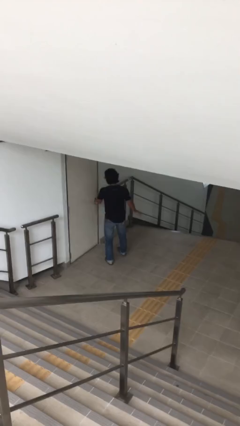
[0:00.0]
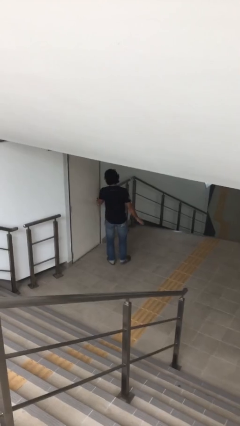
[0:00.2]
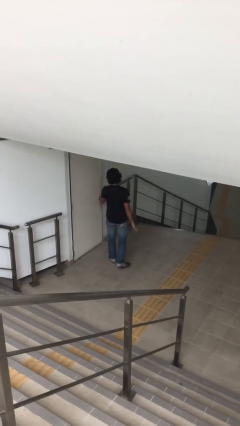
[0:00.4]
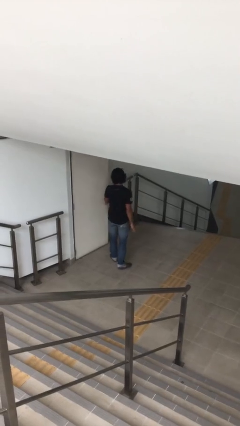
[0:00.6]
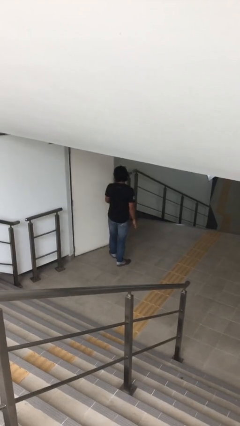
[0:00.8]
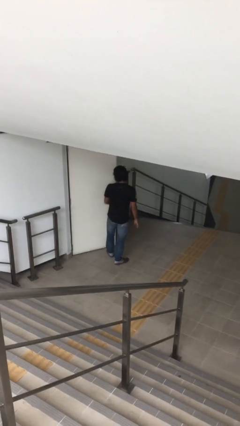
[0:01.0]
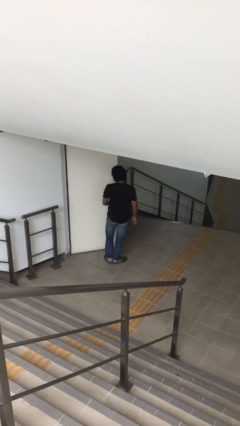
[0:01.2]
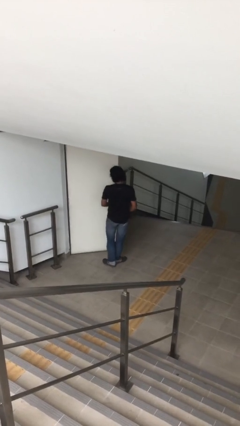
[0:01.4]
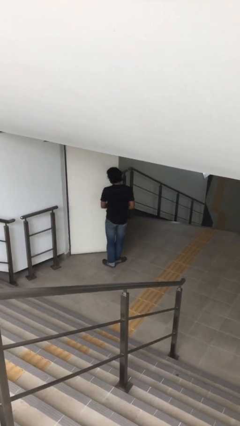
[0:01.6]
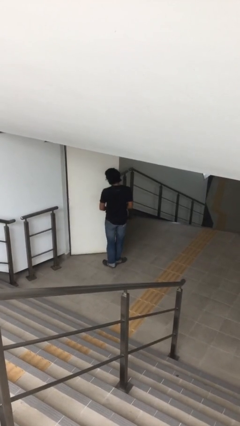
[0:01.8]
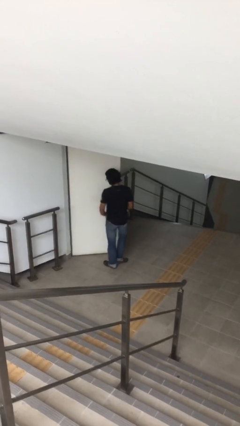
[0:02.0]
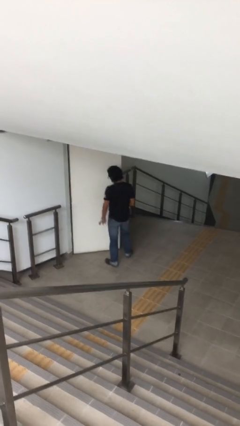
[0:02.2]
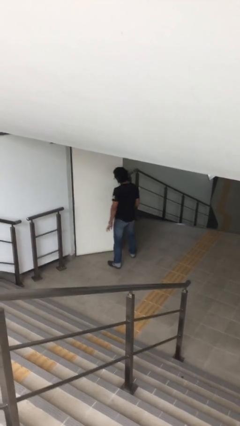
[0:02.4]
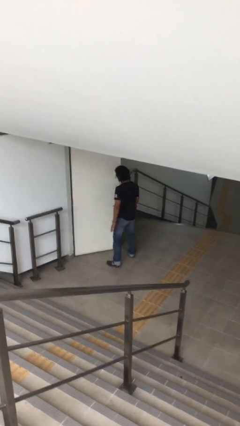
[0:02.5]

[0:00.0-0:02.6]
person opens facility door

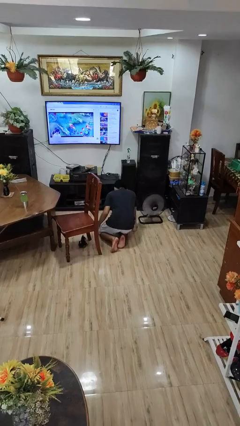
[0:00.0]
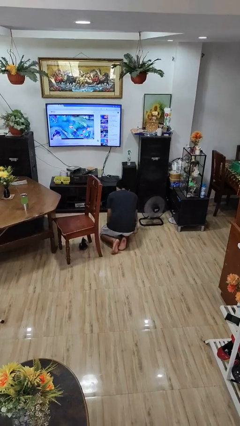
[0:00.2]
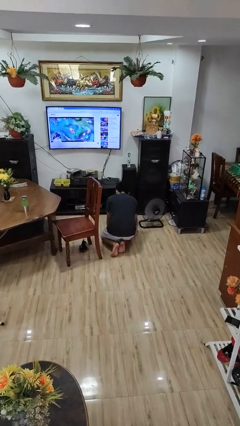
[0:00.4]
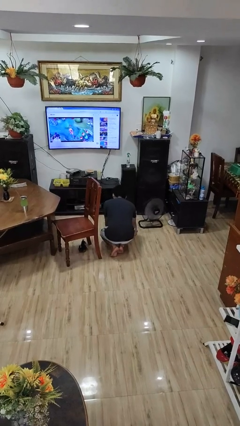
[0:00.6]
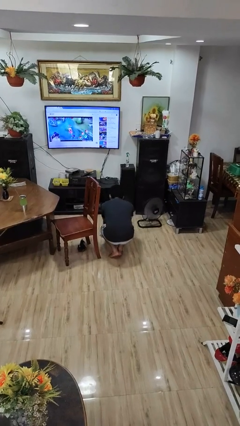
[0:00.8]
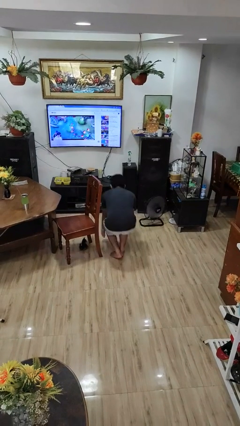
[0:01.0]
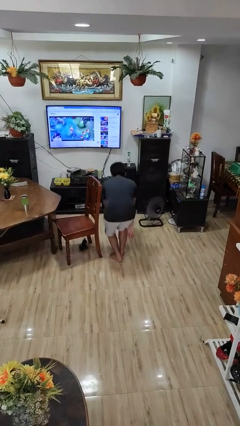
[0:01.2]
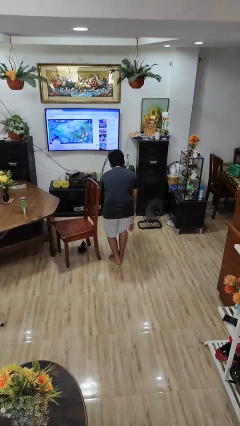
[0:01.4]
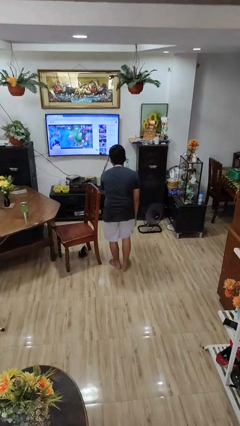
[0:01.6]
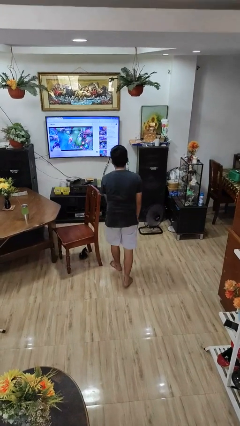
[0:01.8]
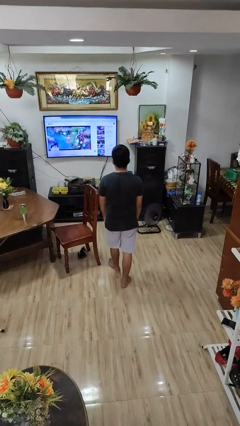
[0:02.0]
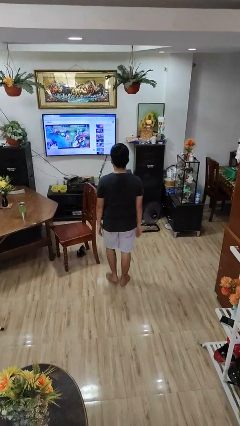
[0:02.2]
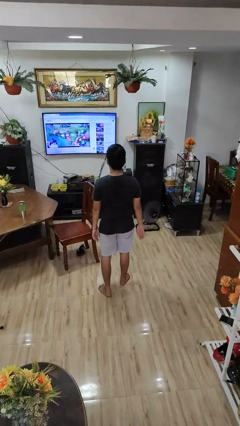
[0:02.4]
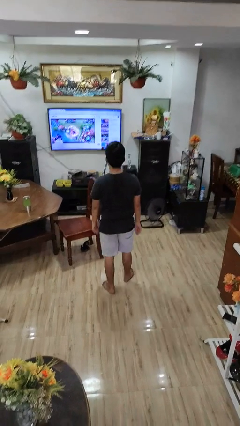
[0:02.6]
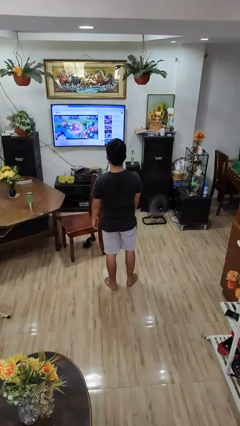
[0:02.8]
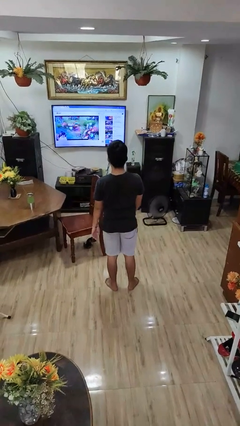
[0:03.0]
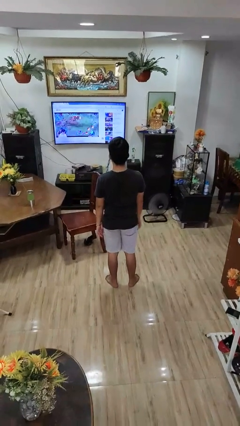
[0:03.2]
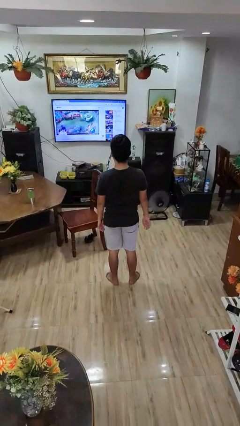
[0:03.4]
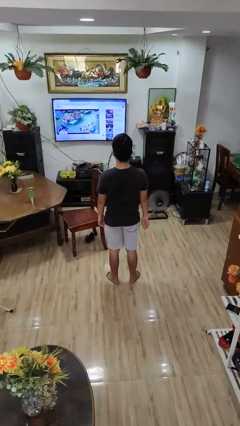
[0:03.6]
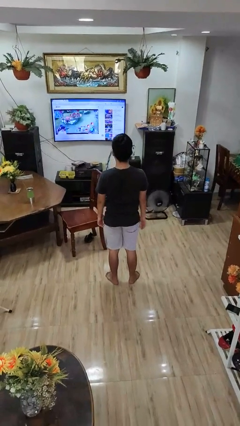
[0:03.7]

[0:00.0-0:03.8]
person stands up from floor

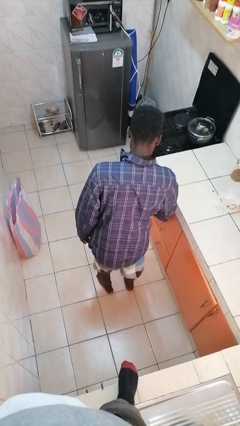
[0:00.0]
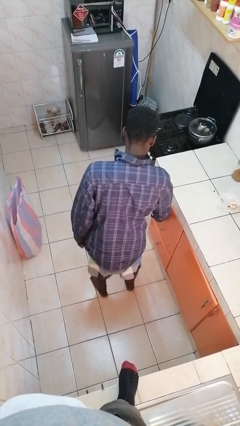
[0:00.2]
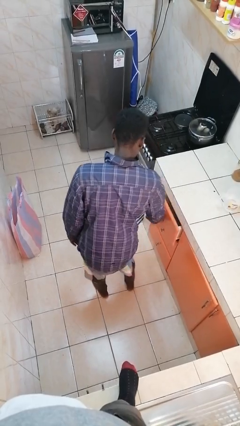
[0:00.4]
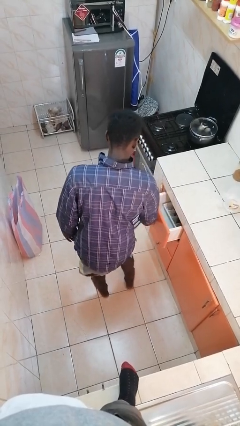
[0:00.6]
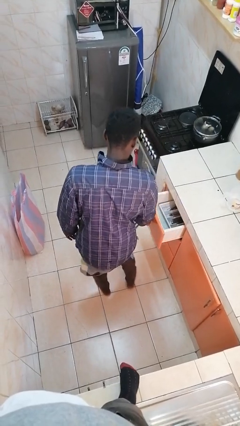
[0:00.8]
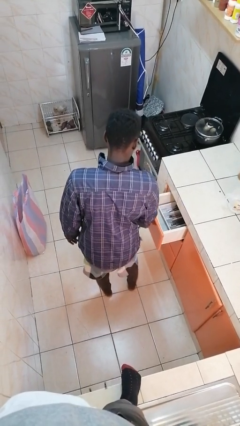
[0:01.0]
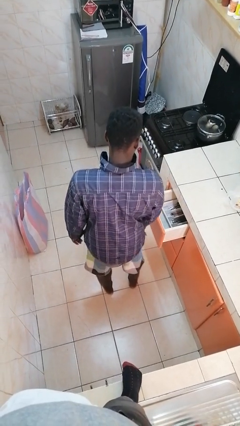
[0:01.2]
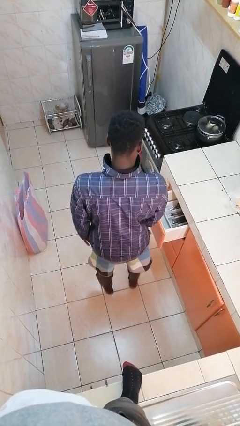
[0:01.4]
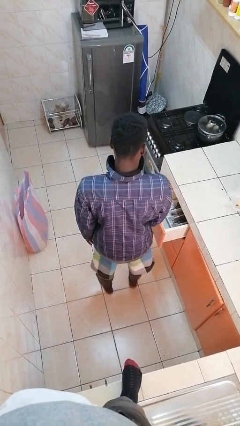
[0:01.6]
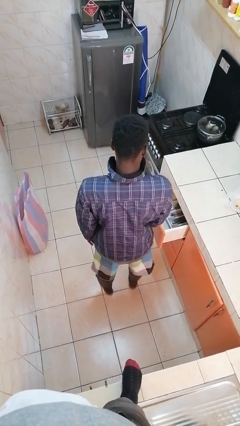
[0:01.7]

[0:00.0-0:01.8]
person opens kitchen drawer

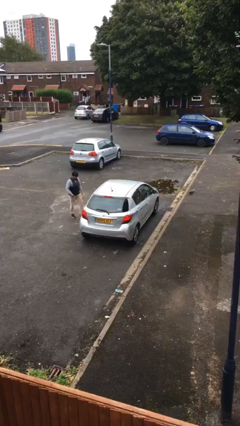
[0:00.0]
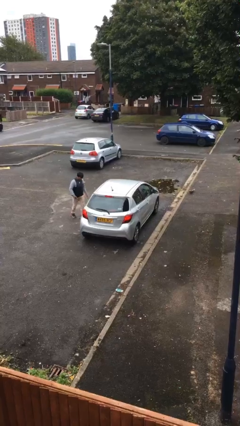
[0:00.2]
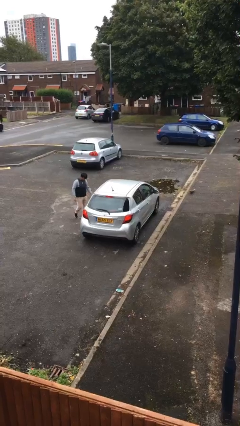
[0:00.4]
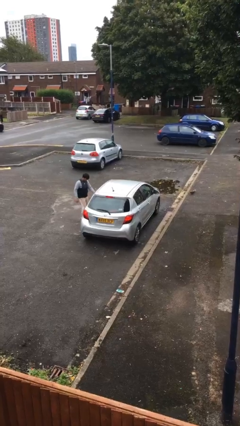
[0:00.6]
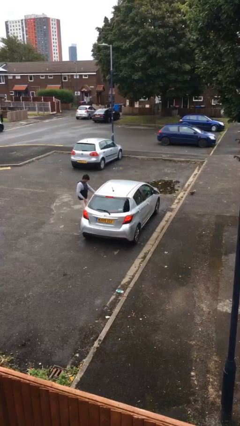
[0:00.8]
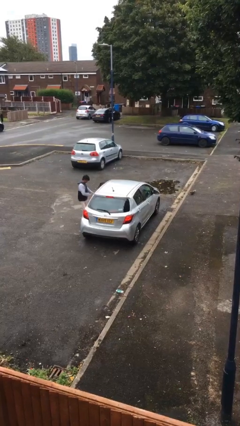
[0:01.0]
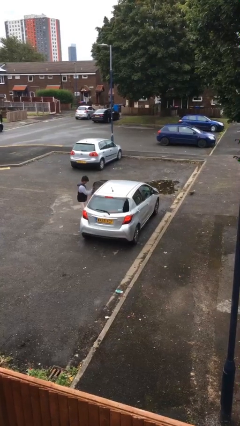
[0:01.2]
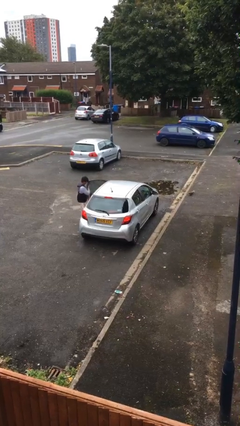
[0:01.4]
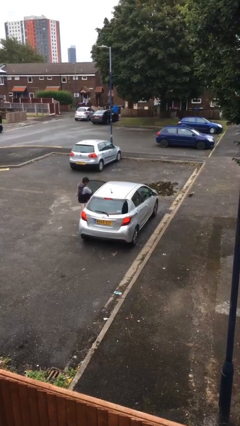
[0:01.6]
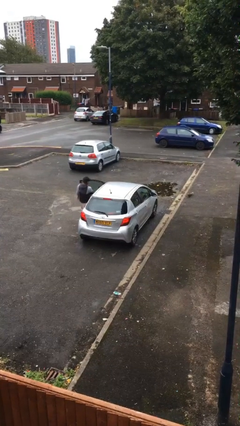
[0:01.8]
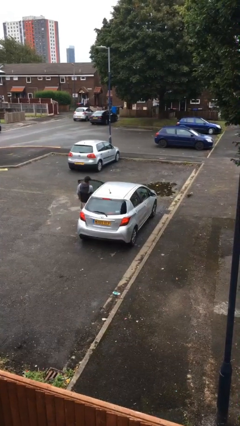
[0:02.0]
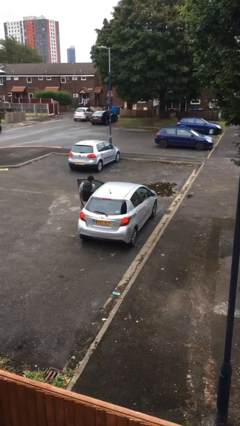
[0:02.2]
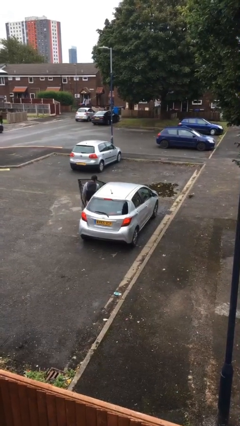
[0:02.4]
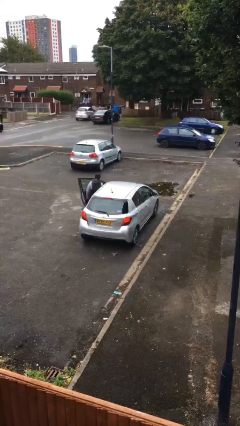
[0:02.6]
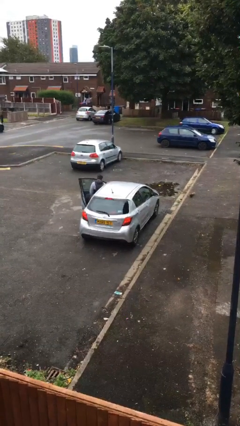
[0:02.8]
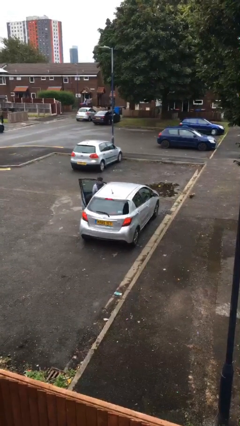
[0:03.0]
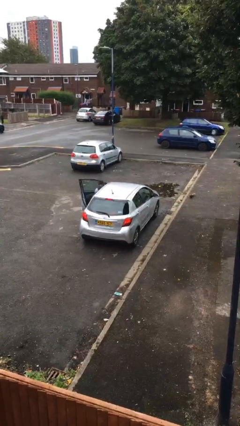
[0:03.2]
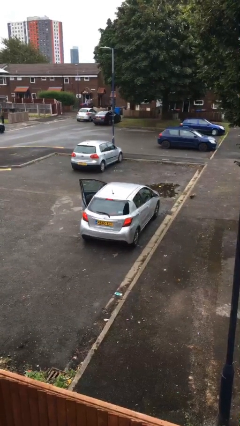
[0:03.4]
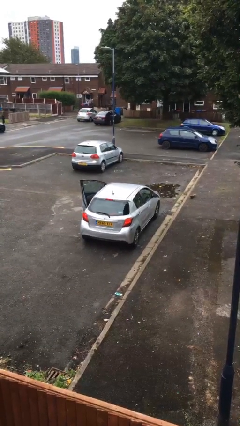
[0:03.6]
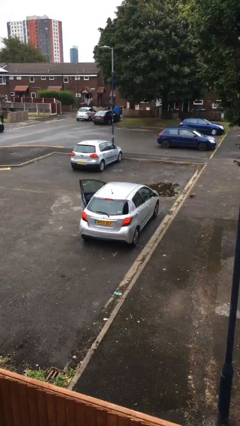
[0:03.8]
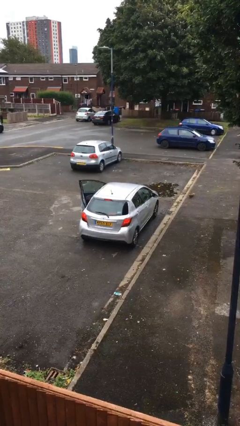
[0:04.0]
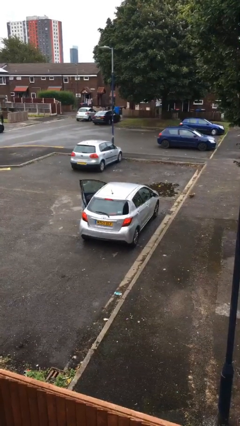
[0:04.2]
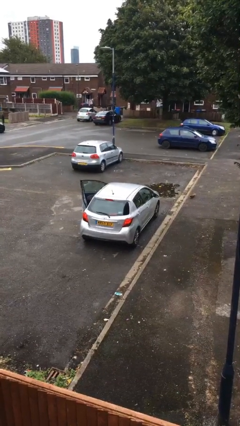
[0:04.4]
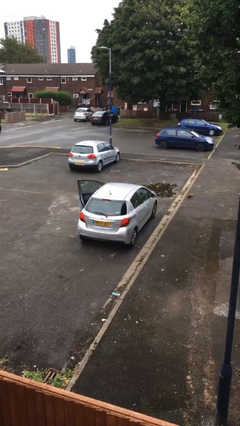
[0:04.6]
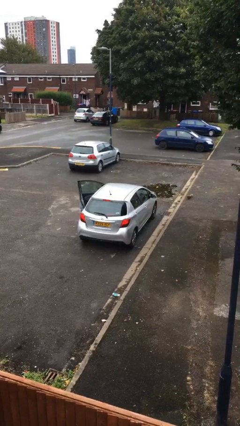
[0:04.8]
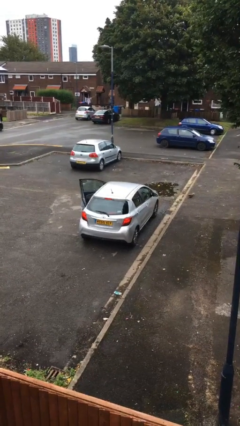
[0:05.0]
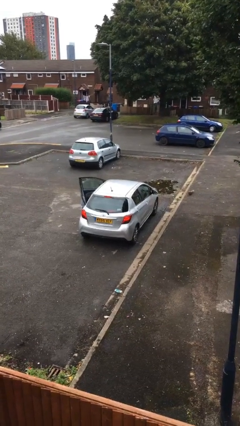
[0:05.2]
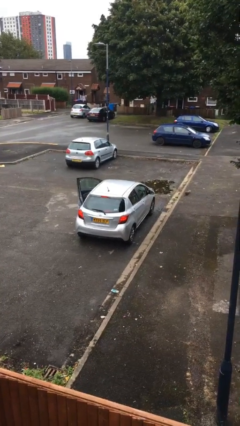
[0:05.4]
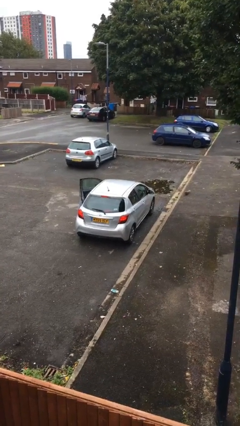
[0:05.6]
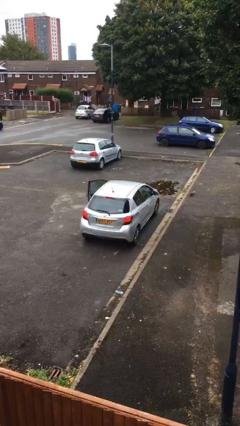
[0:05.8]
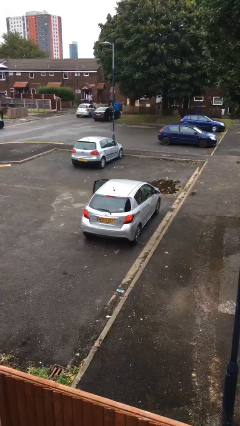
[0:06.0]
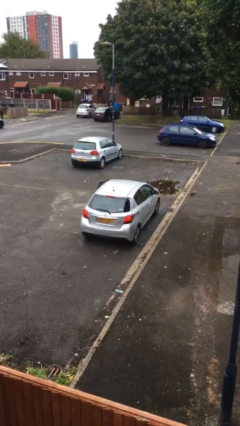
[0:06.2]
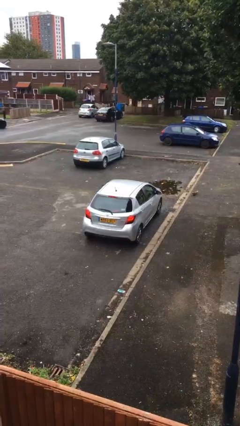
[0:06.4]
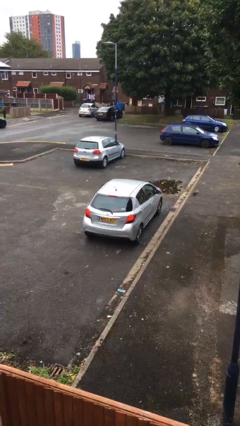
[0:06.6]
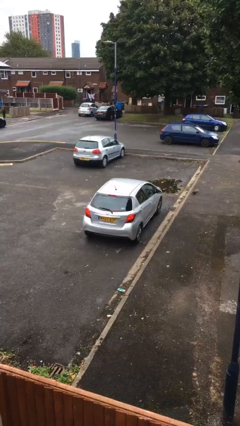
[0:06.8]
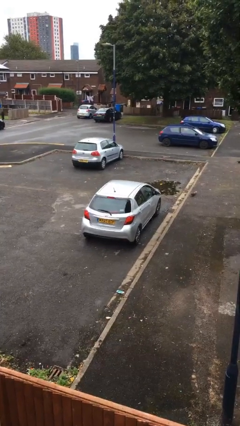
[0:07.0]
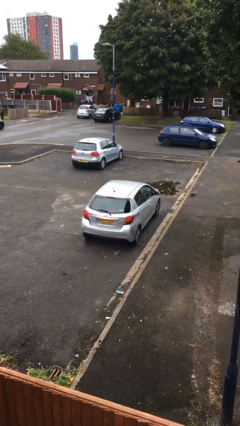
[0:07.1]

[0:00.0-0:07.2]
car picks up person

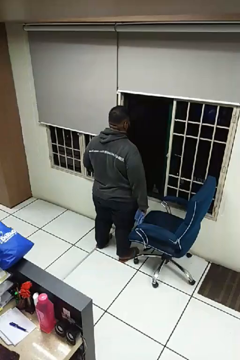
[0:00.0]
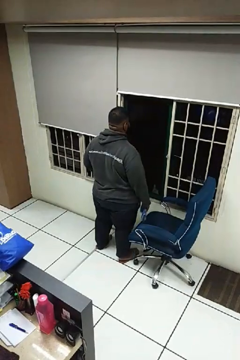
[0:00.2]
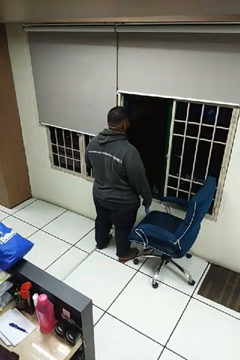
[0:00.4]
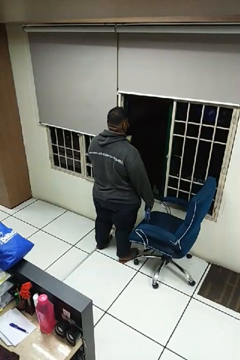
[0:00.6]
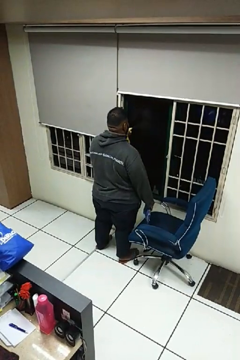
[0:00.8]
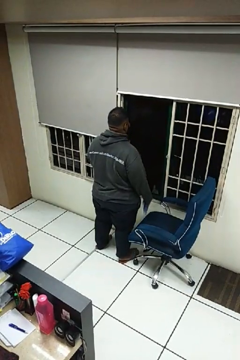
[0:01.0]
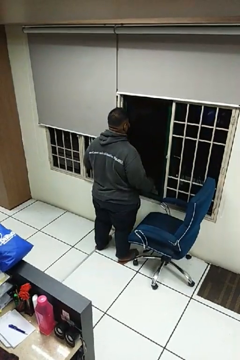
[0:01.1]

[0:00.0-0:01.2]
person sprays from bottle

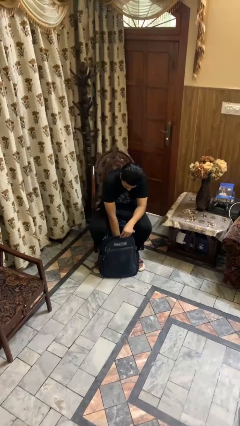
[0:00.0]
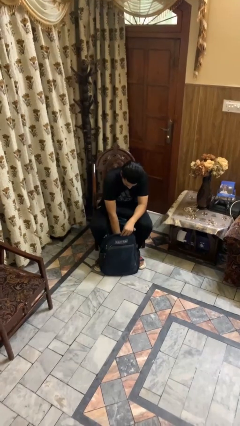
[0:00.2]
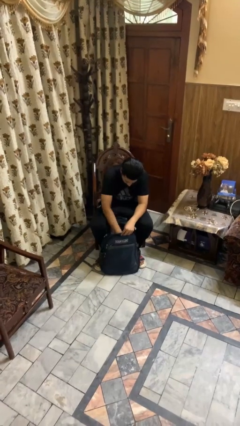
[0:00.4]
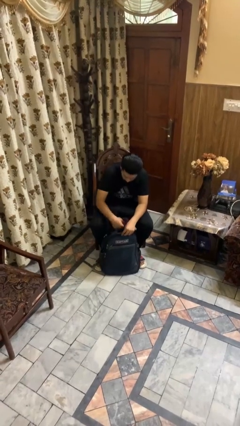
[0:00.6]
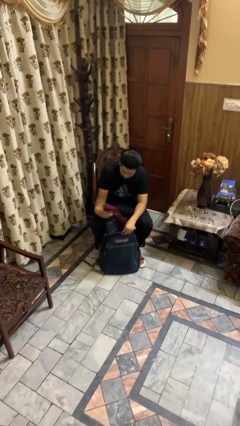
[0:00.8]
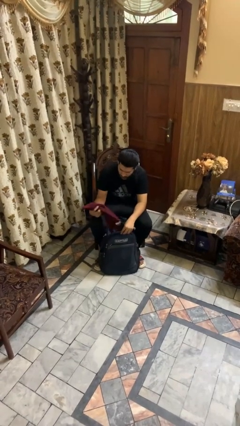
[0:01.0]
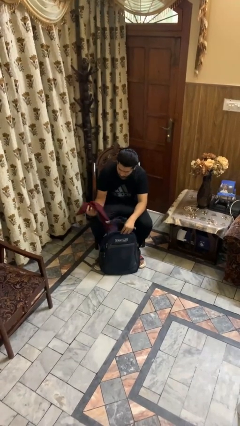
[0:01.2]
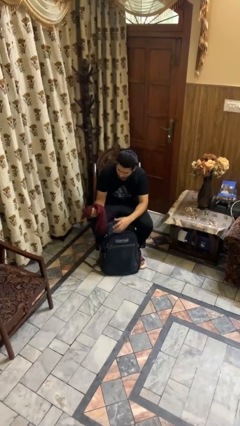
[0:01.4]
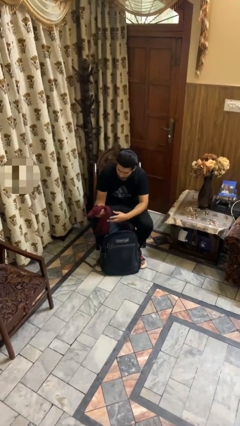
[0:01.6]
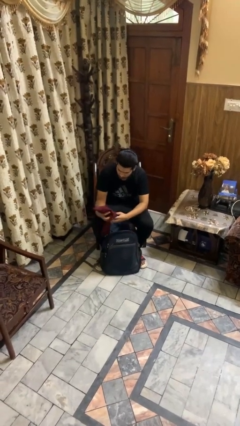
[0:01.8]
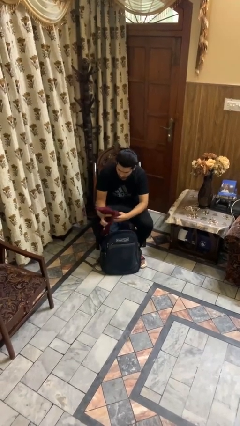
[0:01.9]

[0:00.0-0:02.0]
person takes object from backpack
